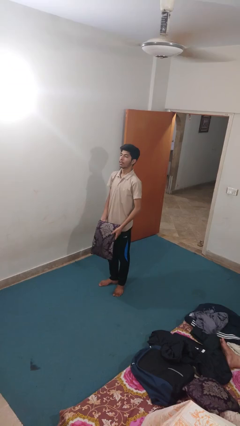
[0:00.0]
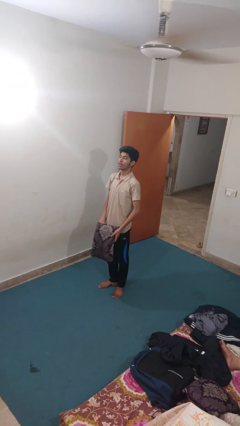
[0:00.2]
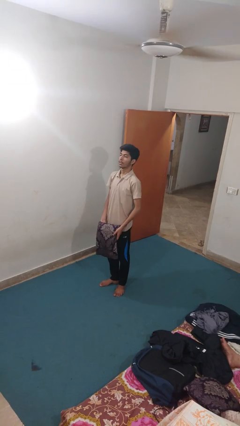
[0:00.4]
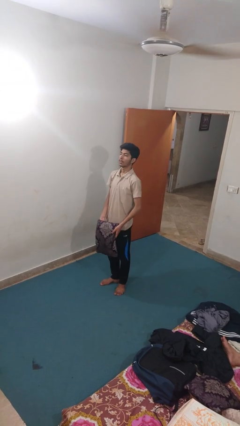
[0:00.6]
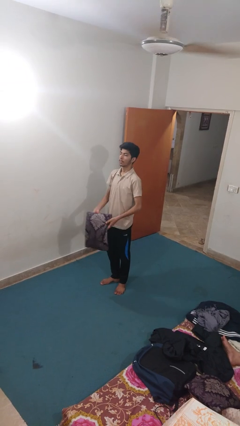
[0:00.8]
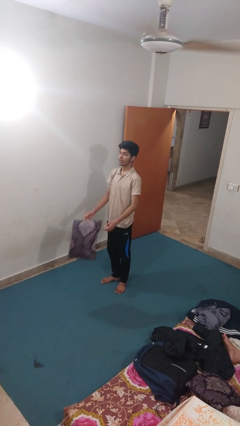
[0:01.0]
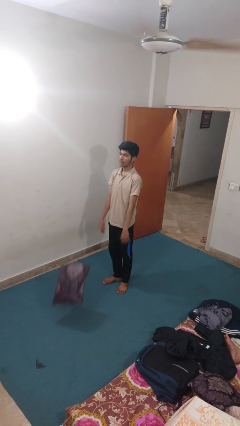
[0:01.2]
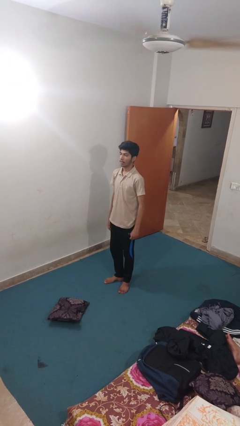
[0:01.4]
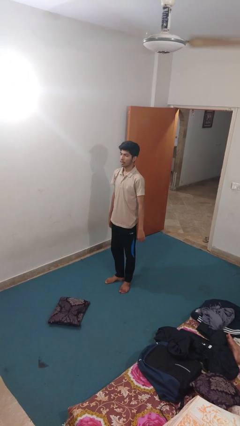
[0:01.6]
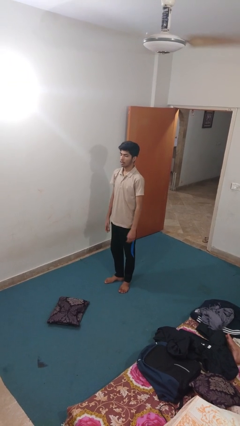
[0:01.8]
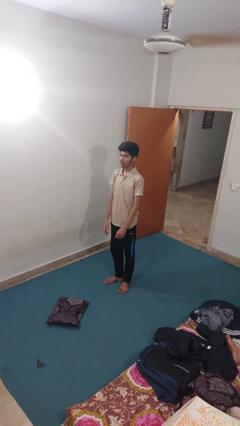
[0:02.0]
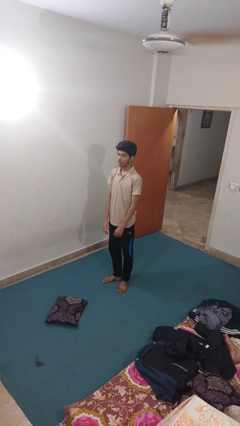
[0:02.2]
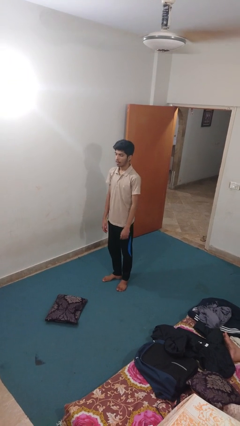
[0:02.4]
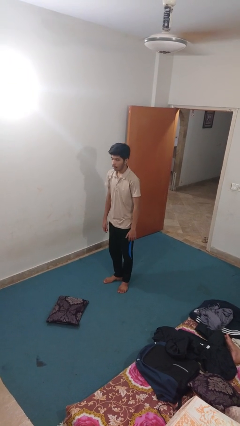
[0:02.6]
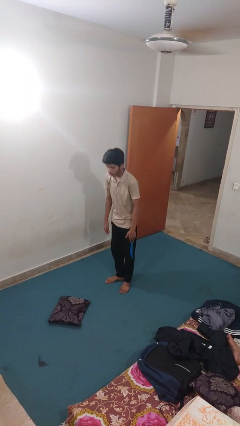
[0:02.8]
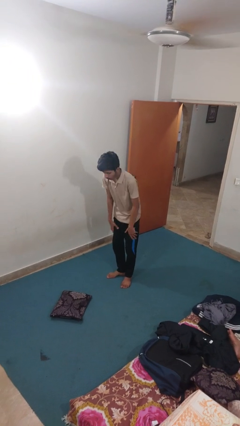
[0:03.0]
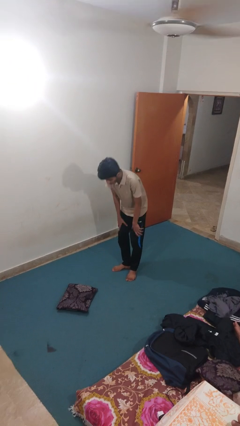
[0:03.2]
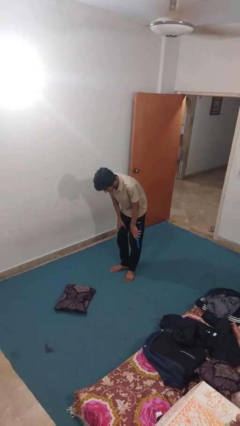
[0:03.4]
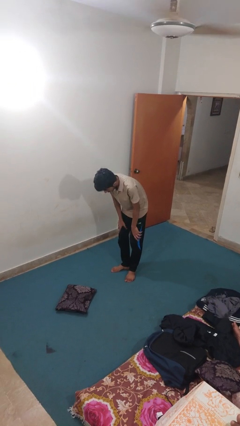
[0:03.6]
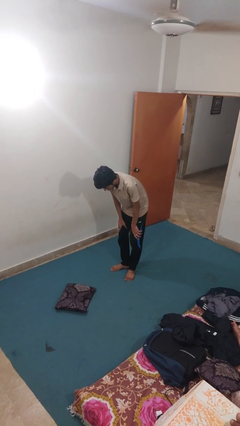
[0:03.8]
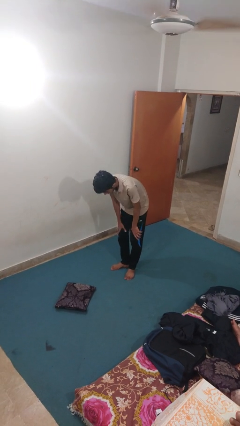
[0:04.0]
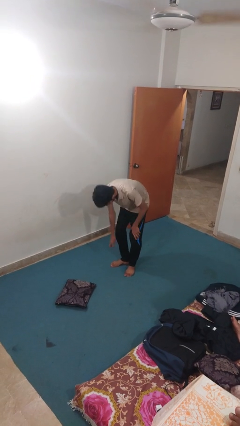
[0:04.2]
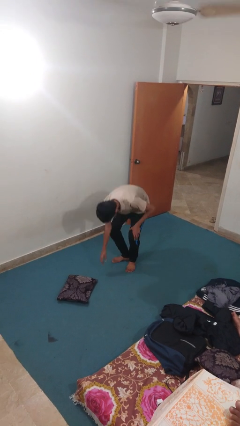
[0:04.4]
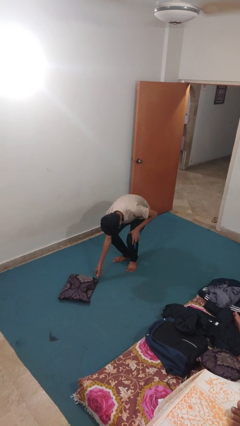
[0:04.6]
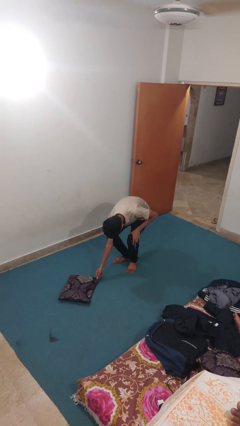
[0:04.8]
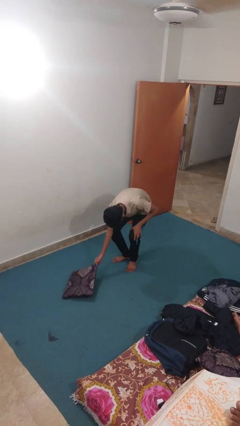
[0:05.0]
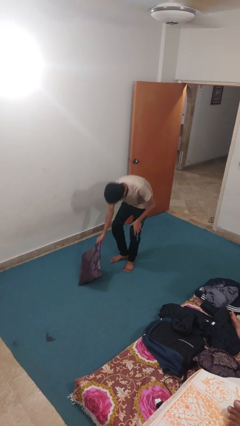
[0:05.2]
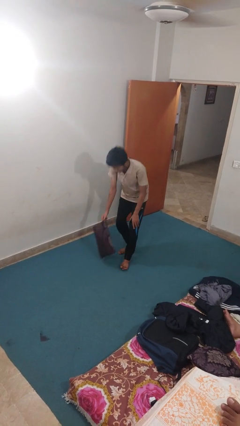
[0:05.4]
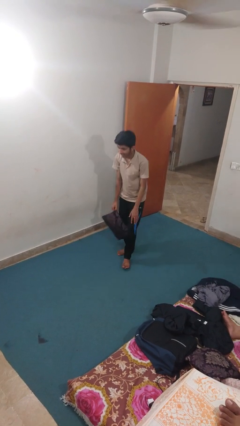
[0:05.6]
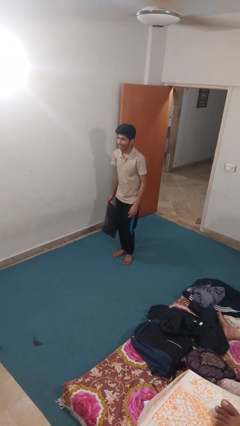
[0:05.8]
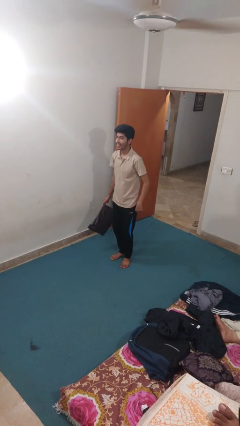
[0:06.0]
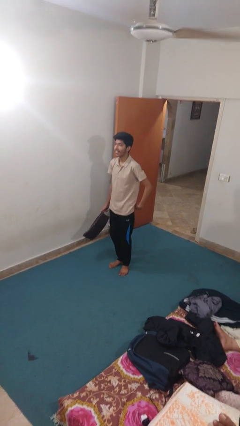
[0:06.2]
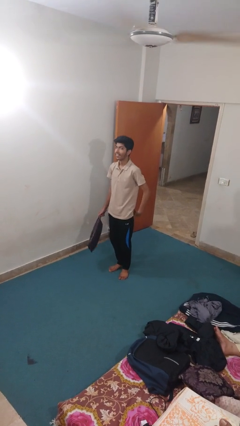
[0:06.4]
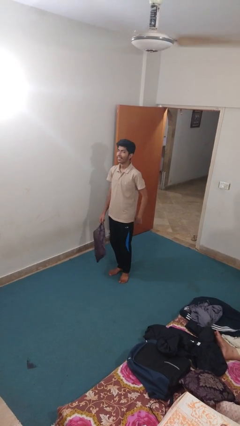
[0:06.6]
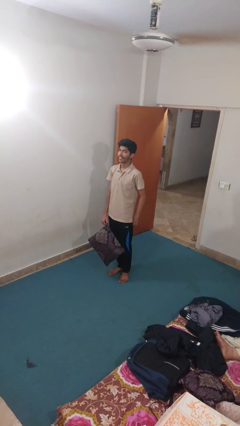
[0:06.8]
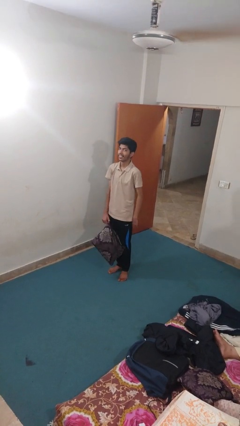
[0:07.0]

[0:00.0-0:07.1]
person drops object

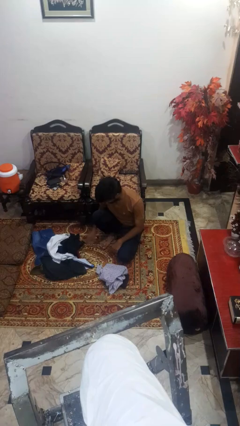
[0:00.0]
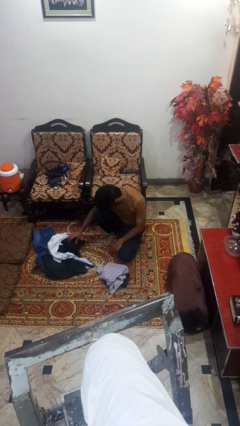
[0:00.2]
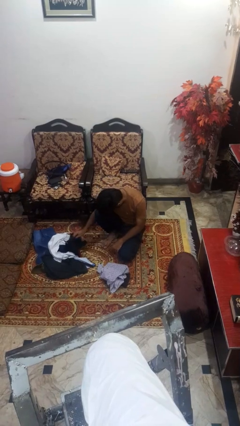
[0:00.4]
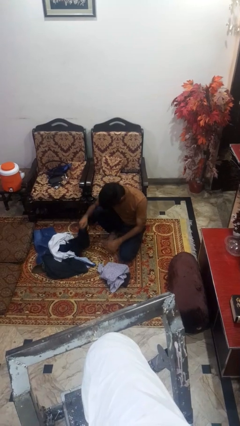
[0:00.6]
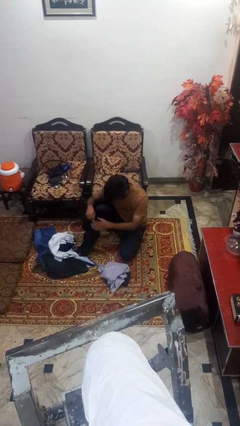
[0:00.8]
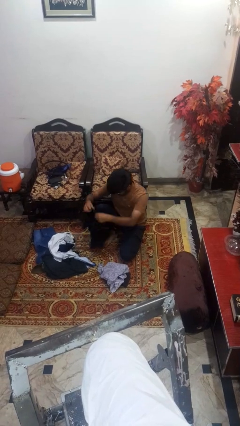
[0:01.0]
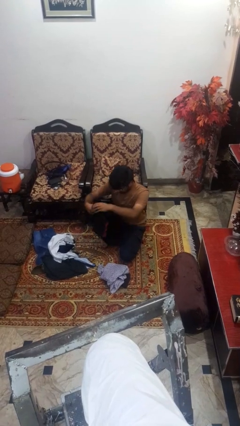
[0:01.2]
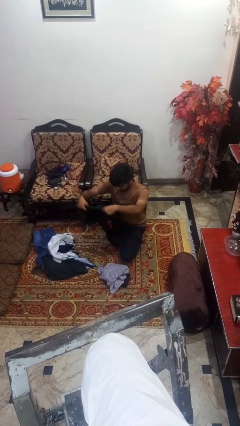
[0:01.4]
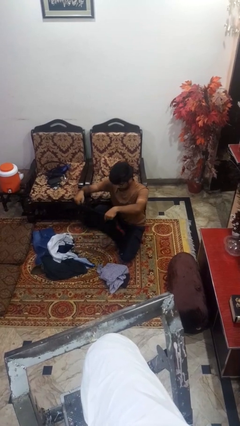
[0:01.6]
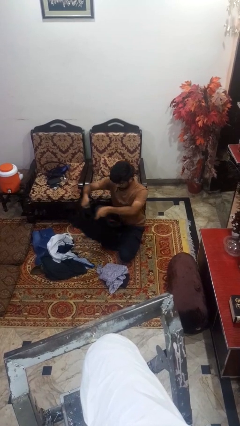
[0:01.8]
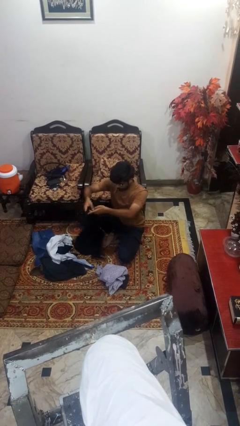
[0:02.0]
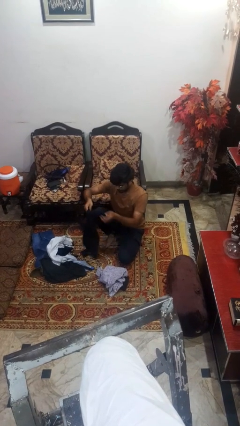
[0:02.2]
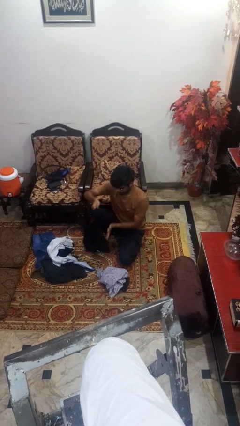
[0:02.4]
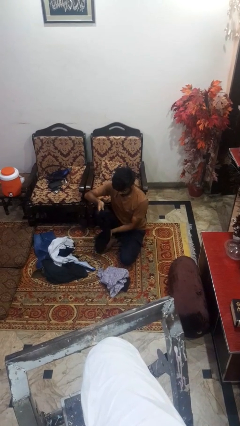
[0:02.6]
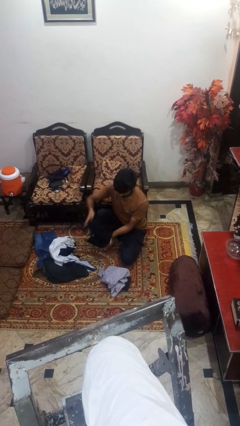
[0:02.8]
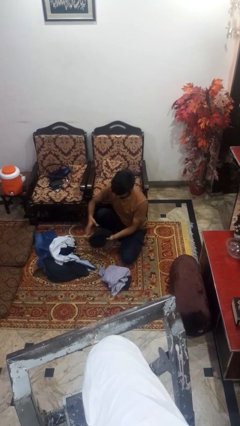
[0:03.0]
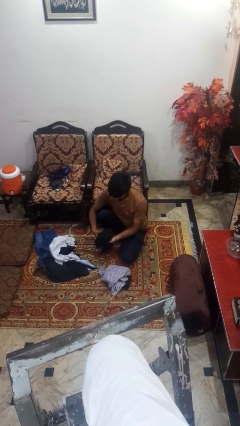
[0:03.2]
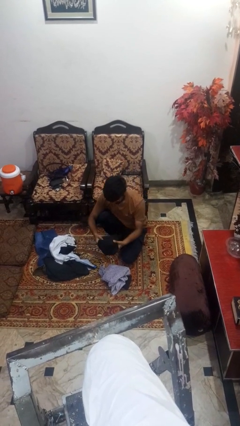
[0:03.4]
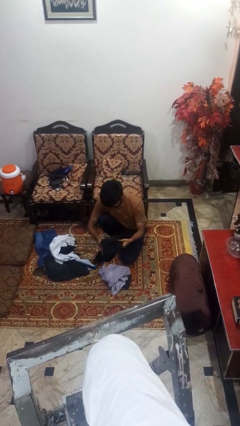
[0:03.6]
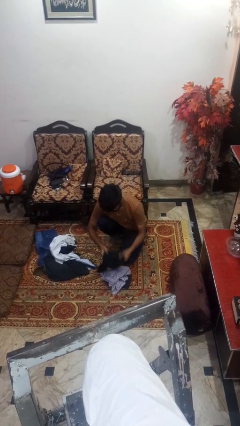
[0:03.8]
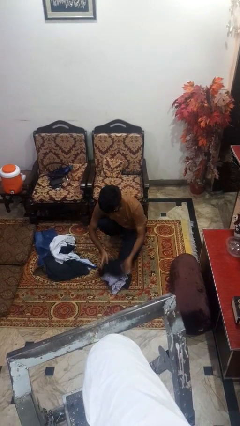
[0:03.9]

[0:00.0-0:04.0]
person folds shirt

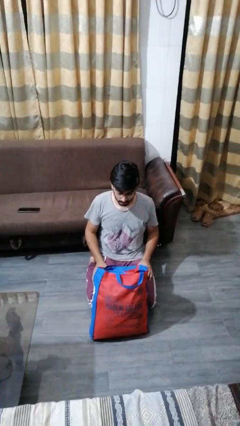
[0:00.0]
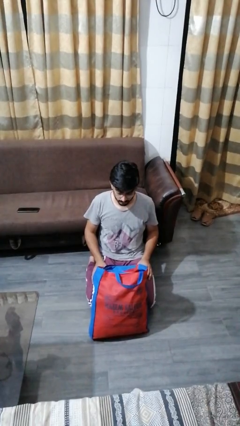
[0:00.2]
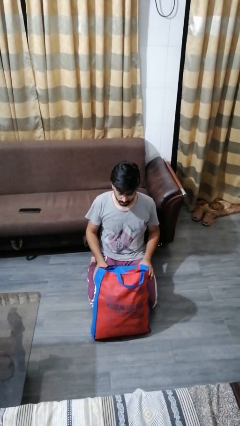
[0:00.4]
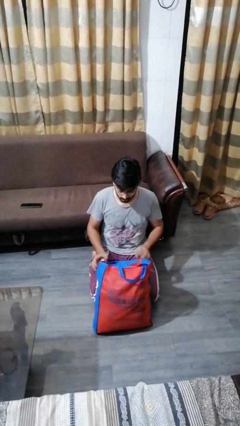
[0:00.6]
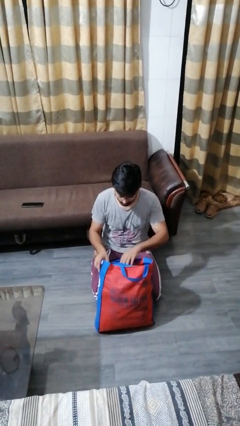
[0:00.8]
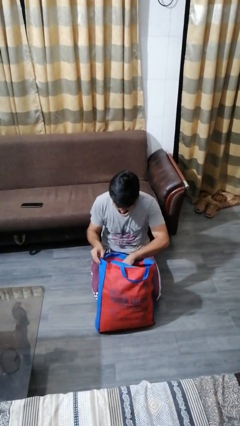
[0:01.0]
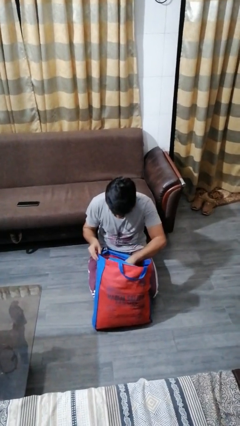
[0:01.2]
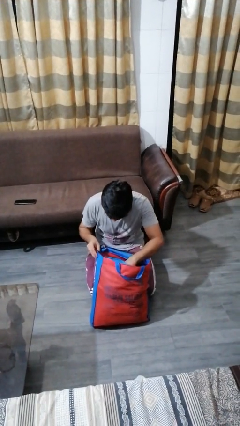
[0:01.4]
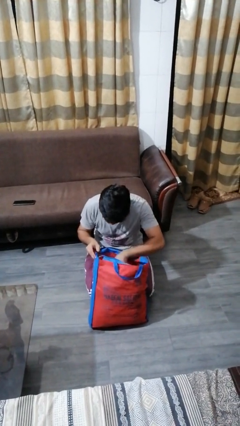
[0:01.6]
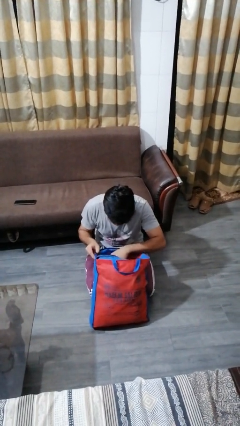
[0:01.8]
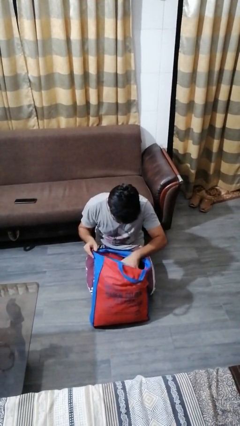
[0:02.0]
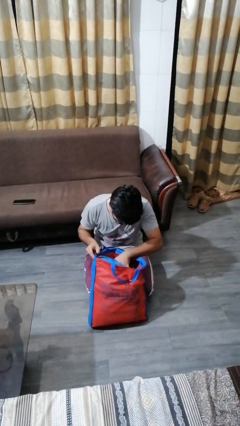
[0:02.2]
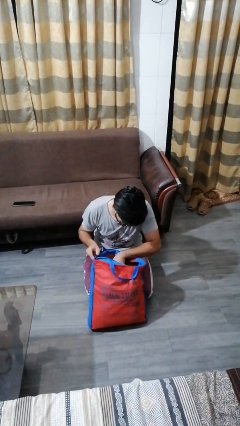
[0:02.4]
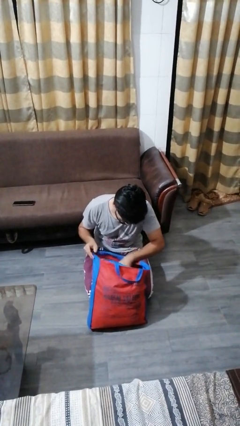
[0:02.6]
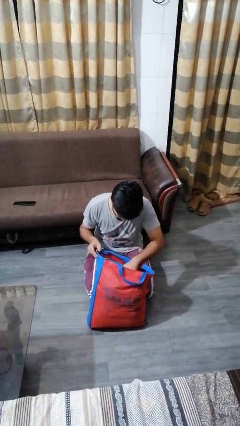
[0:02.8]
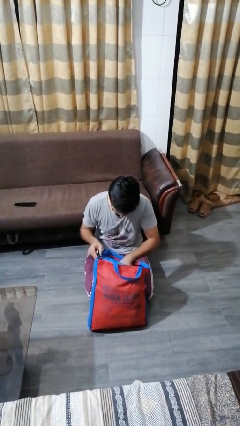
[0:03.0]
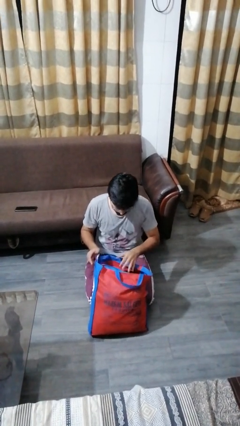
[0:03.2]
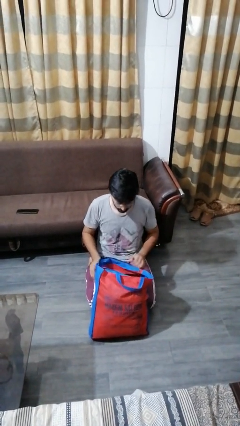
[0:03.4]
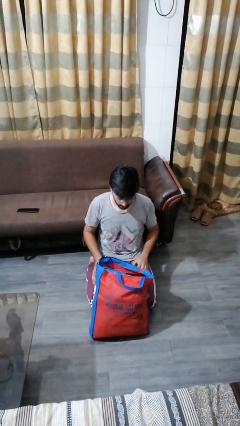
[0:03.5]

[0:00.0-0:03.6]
person searches in bag

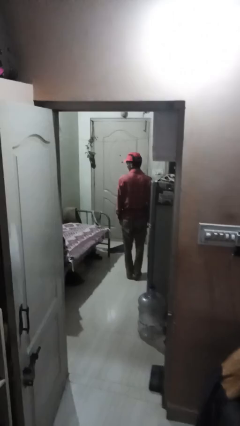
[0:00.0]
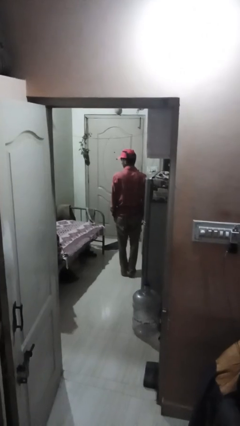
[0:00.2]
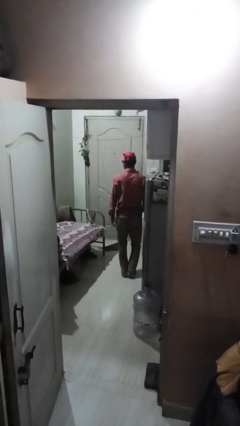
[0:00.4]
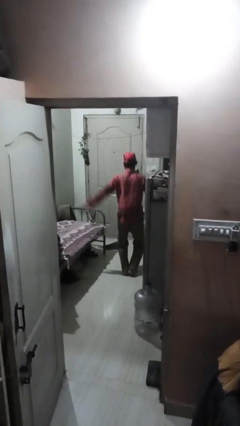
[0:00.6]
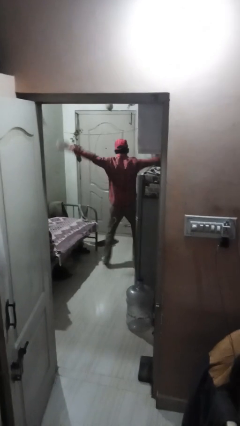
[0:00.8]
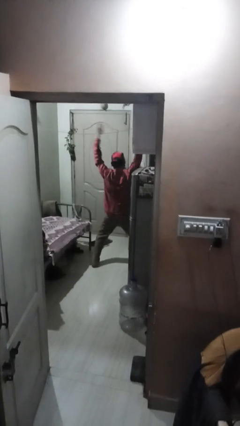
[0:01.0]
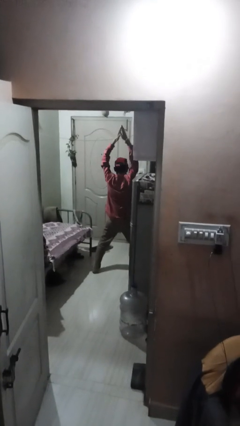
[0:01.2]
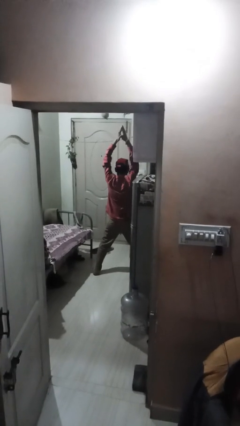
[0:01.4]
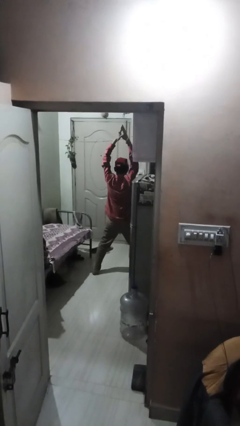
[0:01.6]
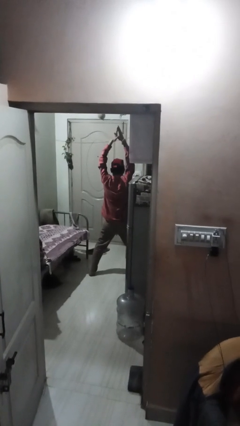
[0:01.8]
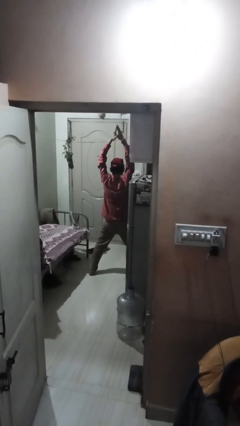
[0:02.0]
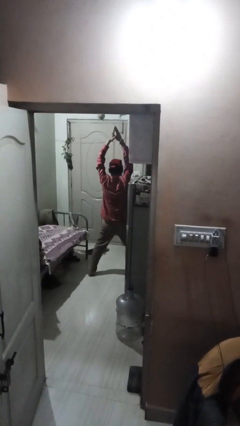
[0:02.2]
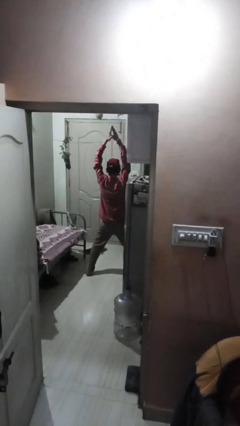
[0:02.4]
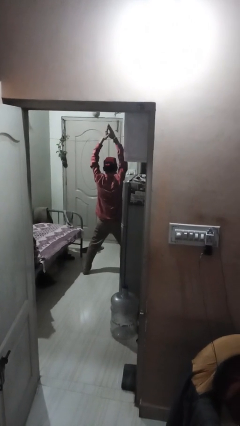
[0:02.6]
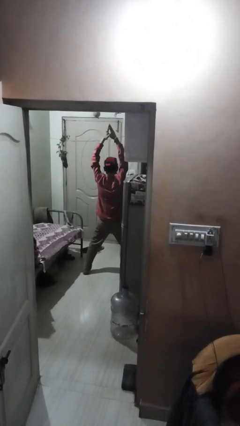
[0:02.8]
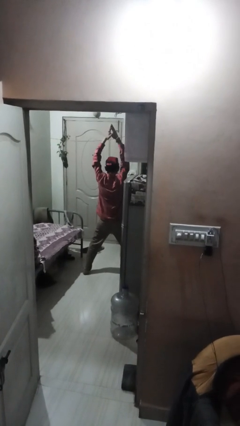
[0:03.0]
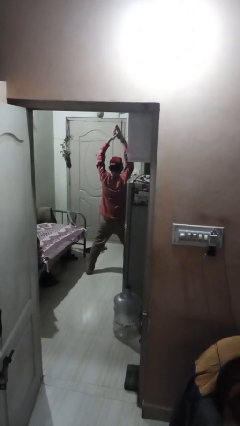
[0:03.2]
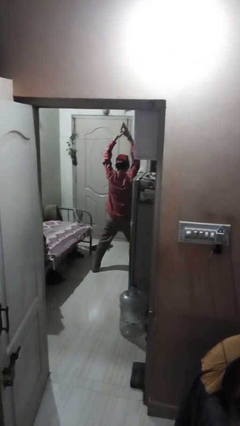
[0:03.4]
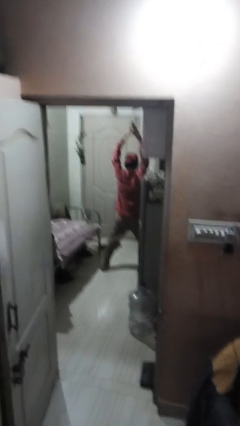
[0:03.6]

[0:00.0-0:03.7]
person exercises with jumping jacks
